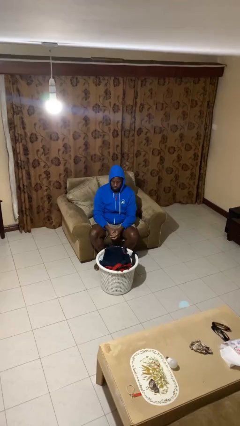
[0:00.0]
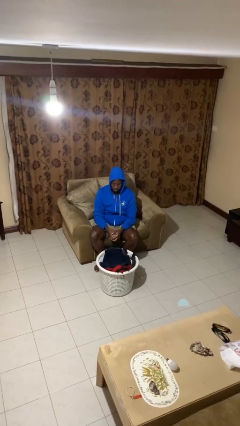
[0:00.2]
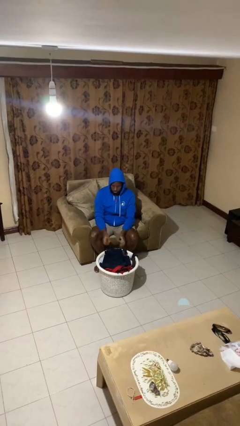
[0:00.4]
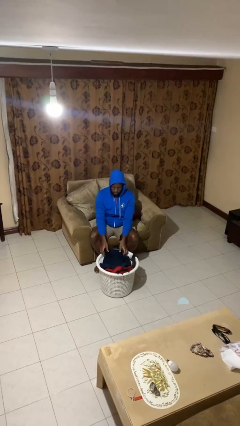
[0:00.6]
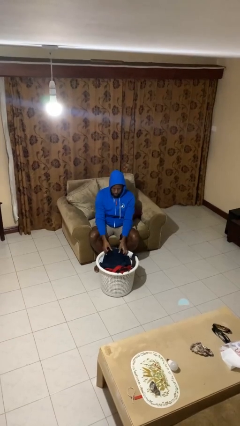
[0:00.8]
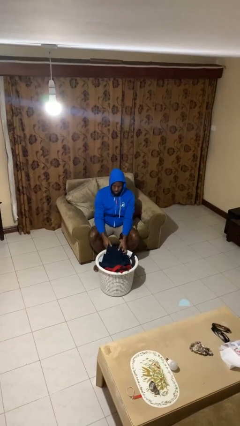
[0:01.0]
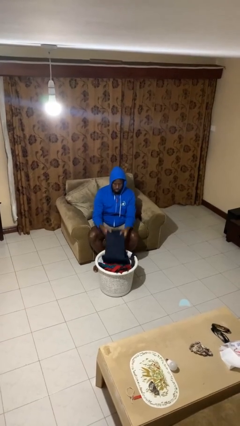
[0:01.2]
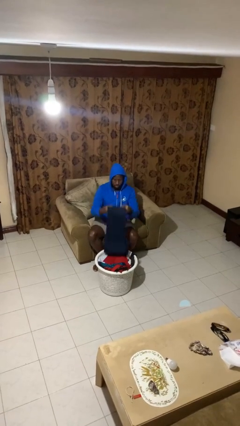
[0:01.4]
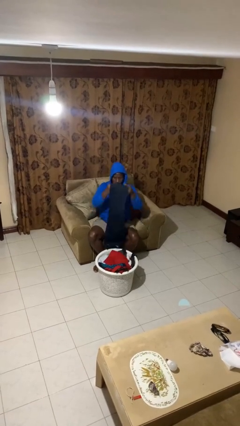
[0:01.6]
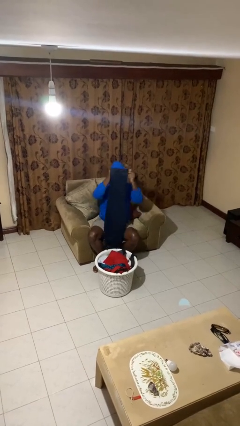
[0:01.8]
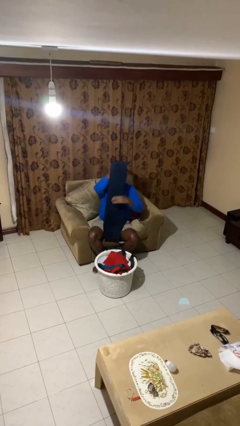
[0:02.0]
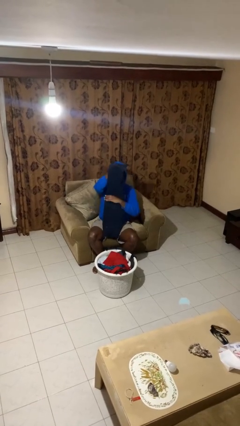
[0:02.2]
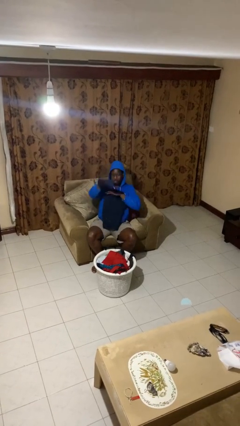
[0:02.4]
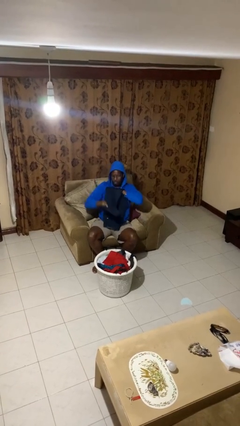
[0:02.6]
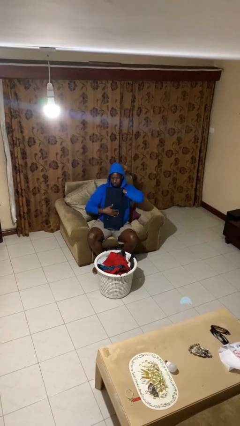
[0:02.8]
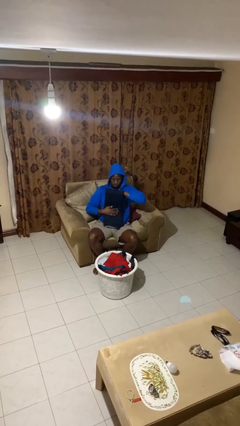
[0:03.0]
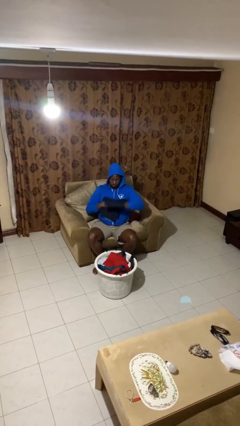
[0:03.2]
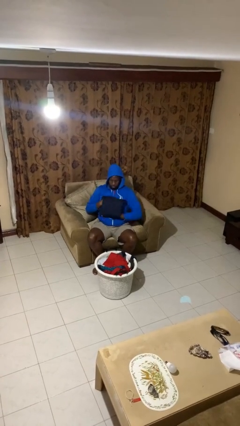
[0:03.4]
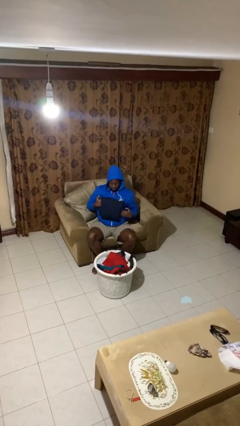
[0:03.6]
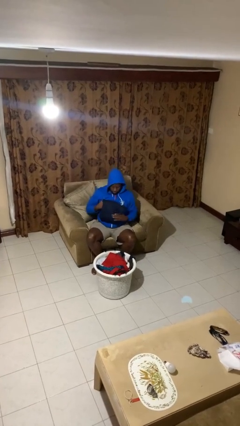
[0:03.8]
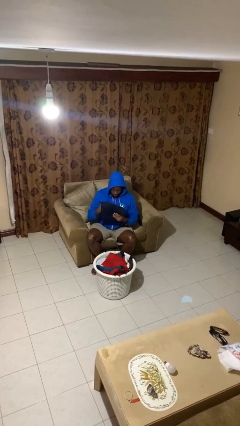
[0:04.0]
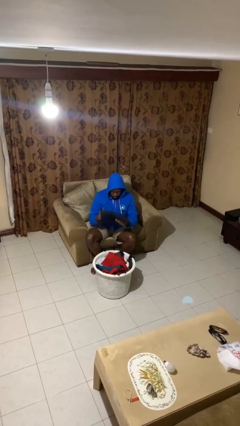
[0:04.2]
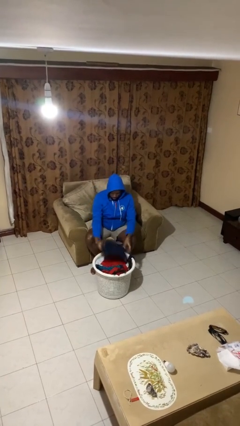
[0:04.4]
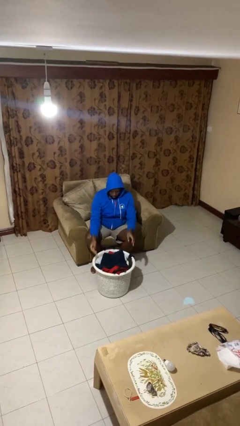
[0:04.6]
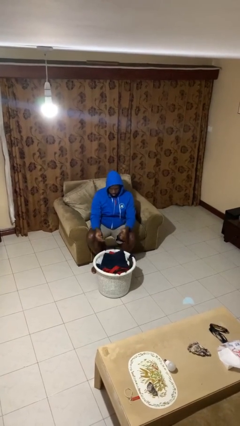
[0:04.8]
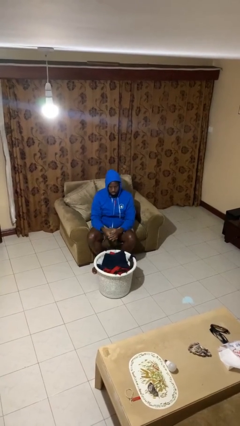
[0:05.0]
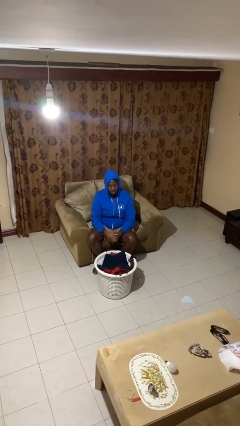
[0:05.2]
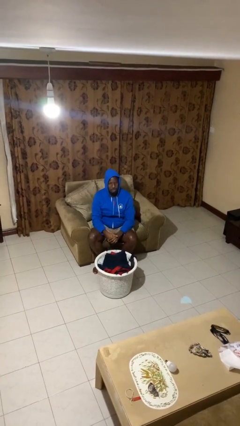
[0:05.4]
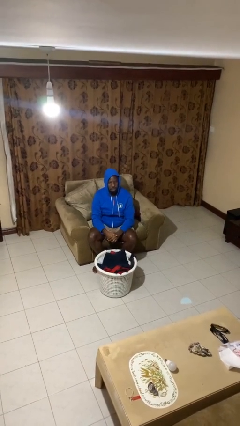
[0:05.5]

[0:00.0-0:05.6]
person folds pants

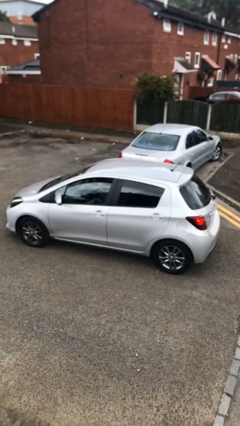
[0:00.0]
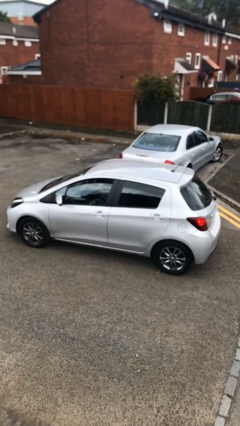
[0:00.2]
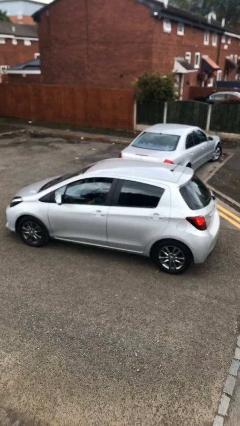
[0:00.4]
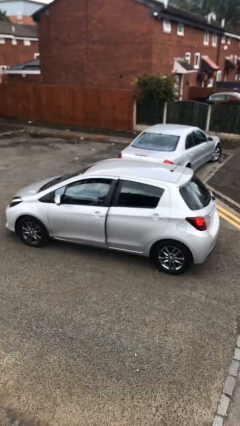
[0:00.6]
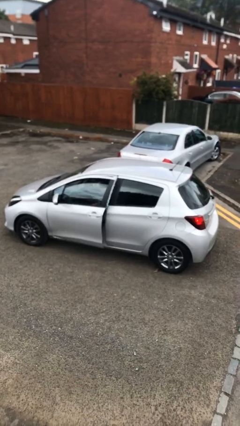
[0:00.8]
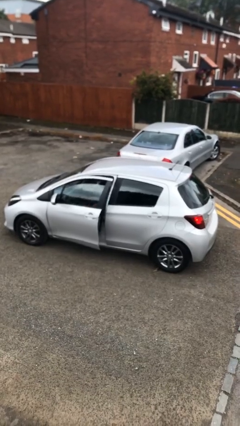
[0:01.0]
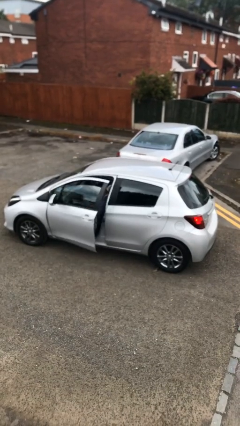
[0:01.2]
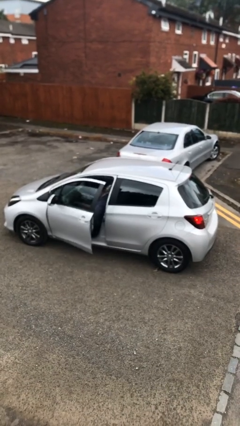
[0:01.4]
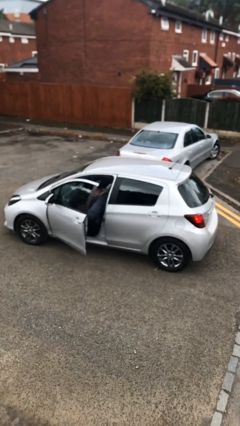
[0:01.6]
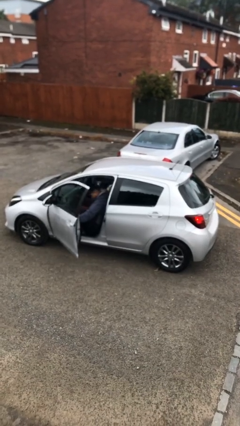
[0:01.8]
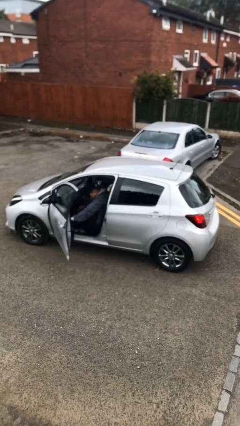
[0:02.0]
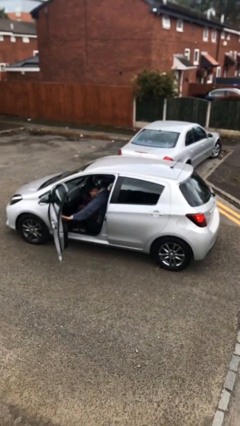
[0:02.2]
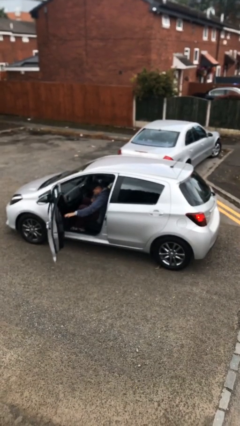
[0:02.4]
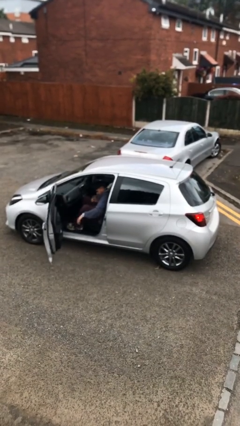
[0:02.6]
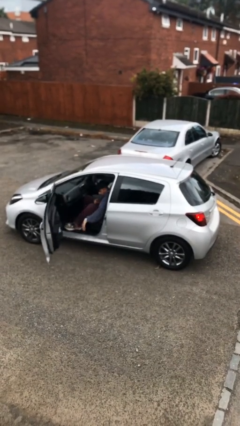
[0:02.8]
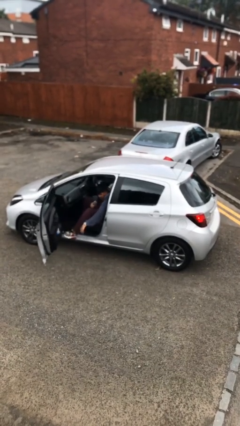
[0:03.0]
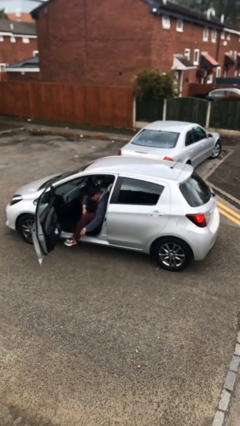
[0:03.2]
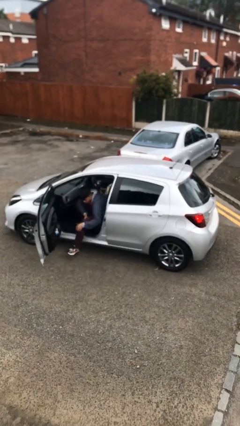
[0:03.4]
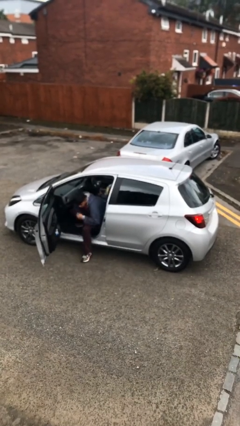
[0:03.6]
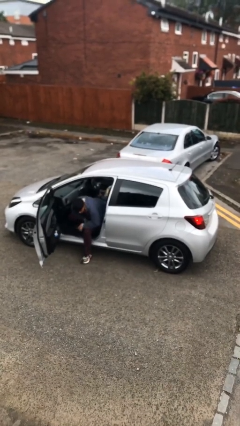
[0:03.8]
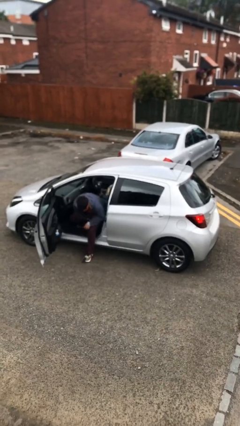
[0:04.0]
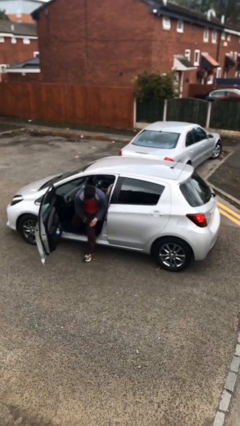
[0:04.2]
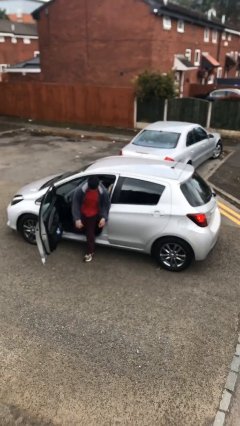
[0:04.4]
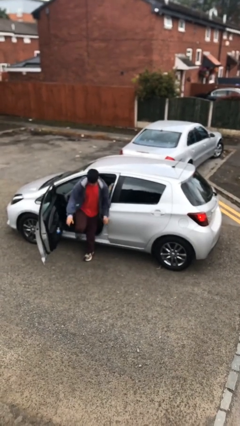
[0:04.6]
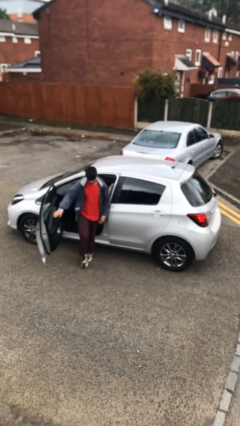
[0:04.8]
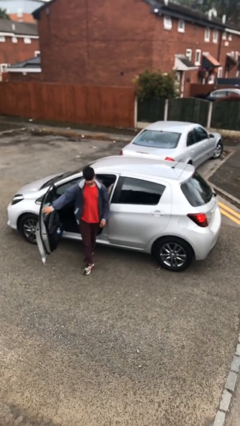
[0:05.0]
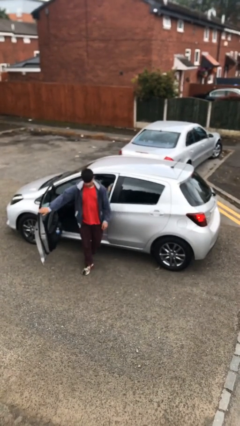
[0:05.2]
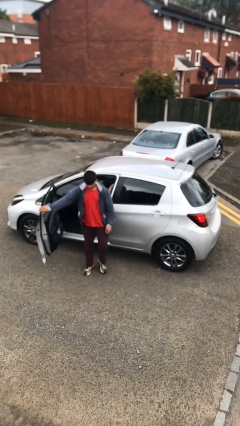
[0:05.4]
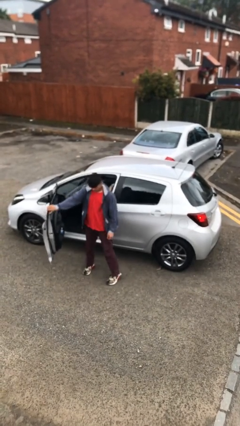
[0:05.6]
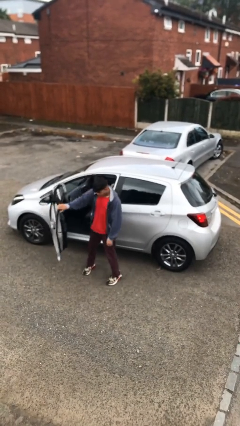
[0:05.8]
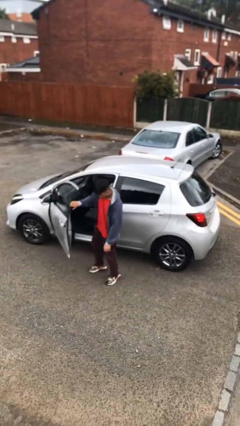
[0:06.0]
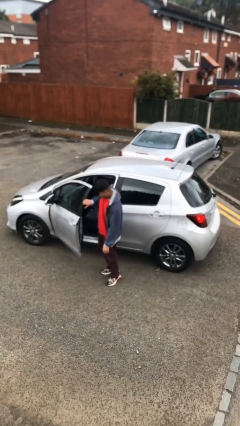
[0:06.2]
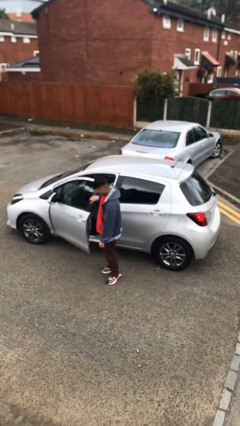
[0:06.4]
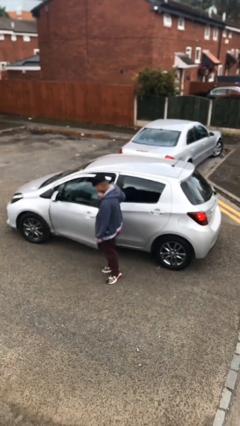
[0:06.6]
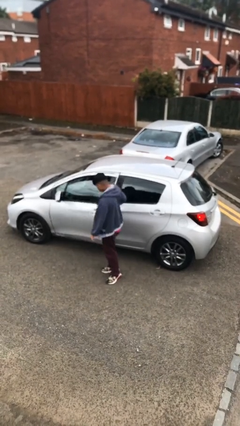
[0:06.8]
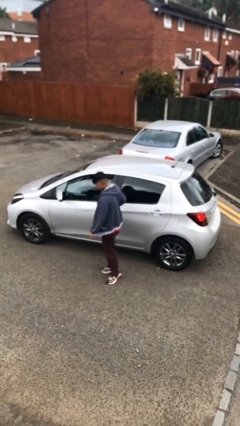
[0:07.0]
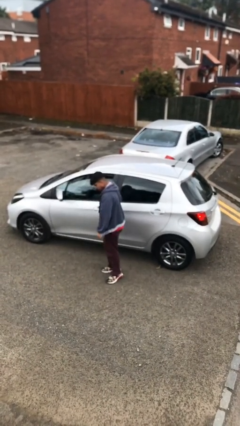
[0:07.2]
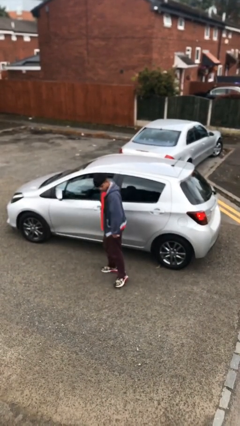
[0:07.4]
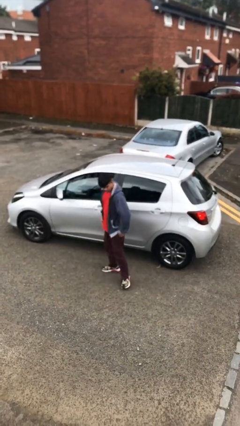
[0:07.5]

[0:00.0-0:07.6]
car drops off person

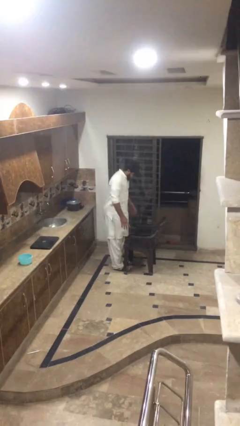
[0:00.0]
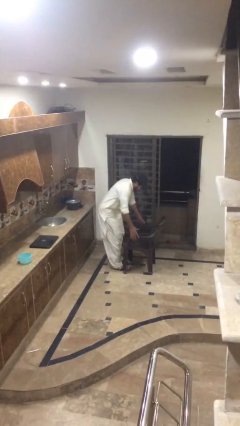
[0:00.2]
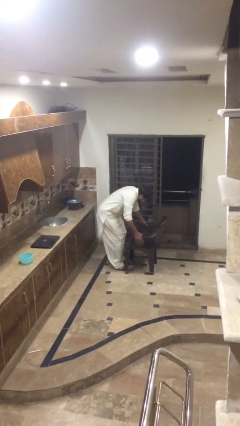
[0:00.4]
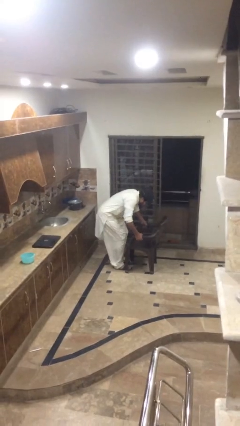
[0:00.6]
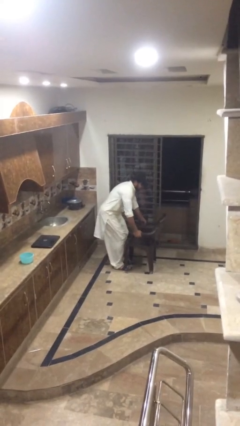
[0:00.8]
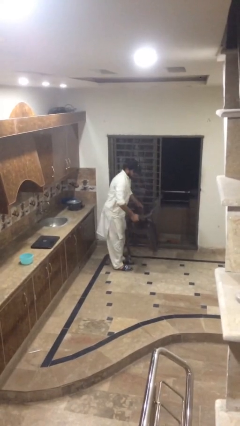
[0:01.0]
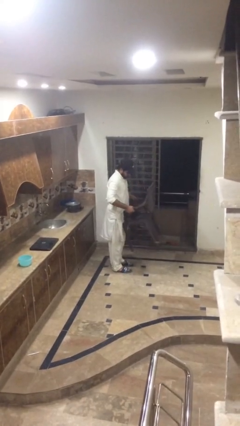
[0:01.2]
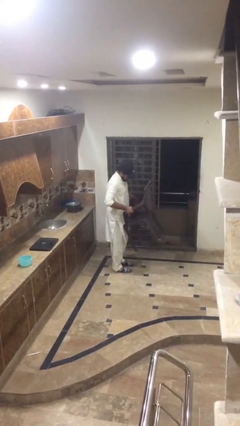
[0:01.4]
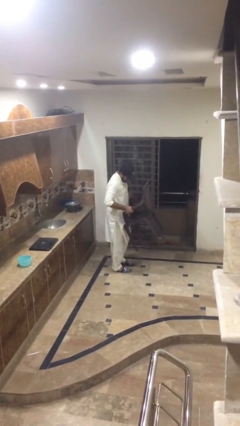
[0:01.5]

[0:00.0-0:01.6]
person picks up object from floor

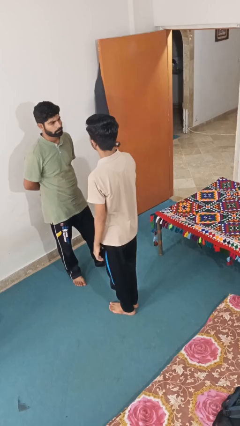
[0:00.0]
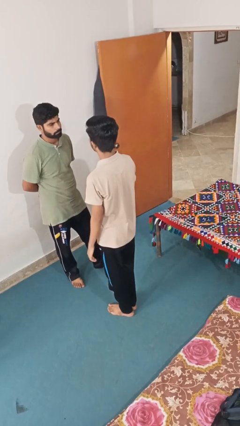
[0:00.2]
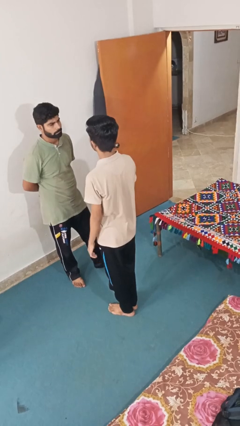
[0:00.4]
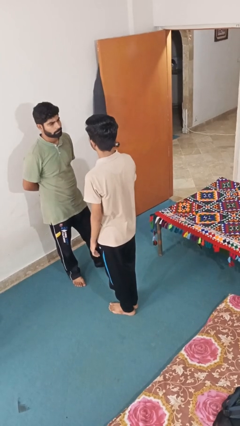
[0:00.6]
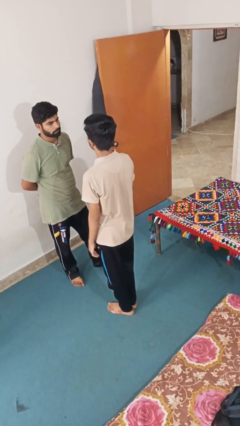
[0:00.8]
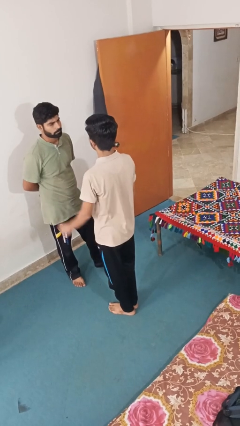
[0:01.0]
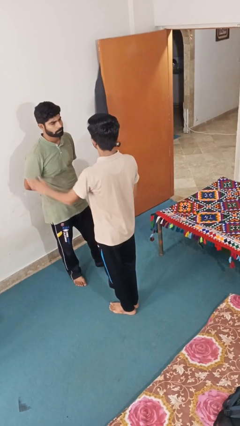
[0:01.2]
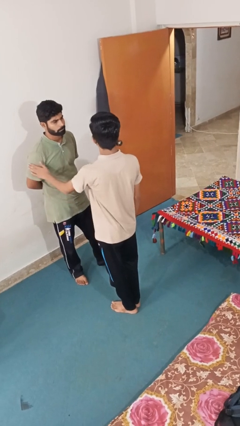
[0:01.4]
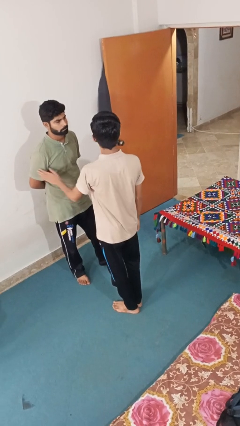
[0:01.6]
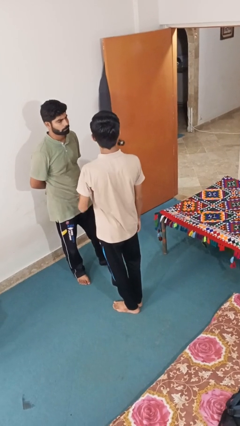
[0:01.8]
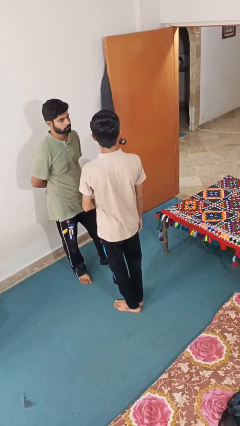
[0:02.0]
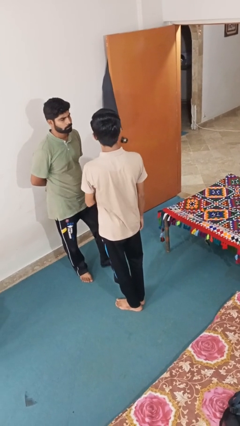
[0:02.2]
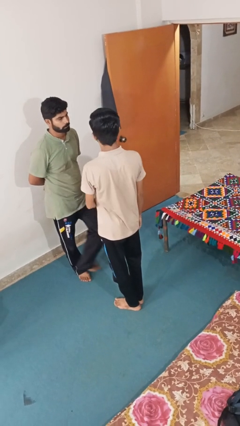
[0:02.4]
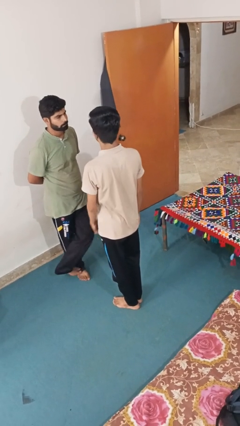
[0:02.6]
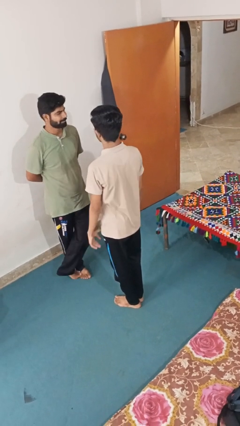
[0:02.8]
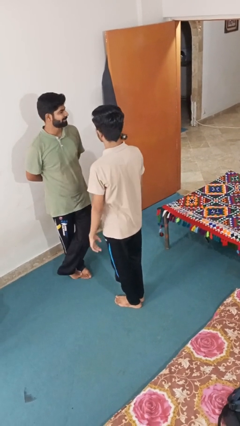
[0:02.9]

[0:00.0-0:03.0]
person shoves person
